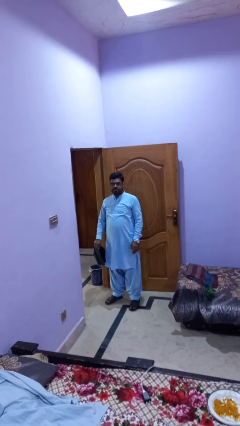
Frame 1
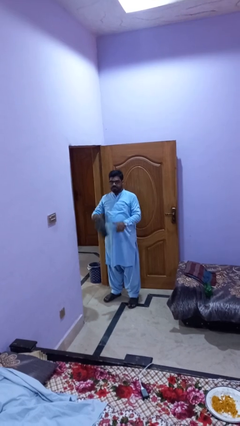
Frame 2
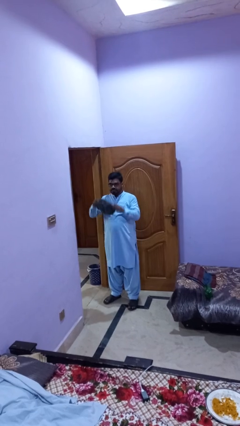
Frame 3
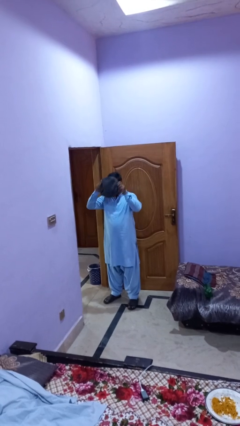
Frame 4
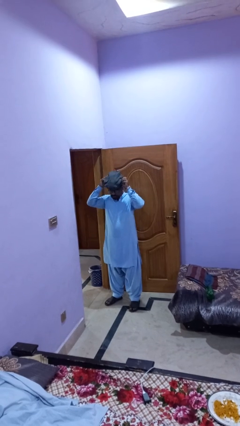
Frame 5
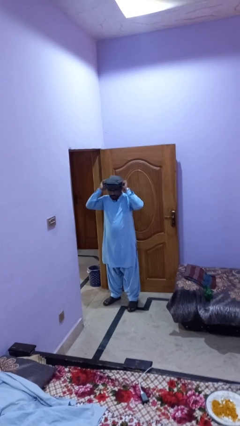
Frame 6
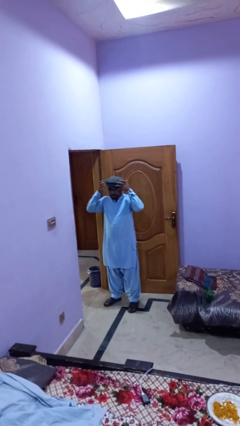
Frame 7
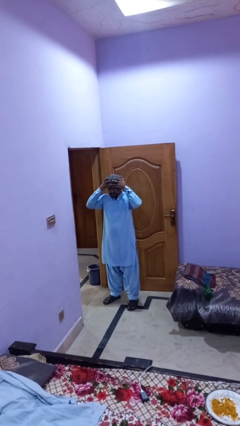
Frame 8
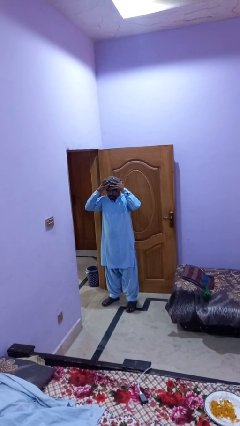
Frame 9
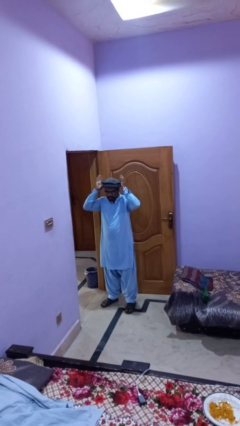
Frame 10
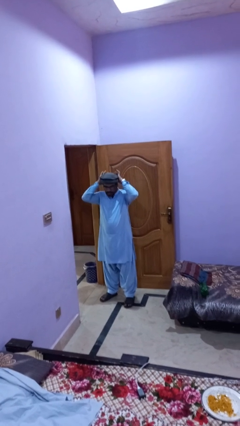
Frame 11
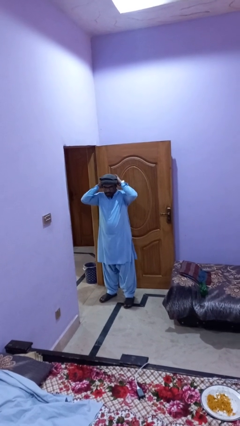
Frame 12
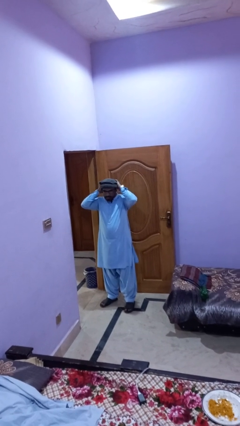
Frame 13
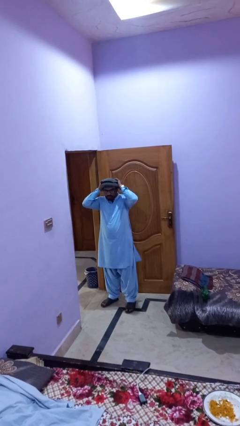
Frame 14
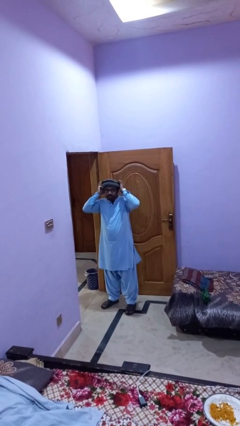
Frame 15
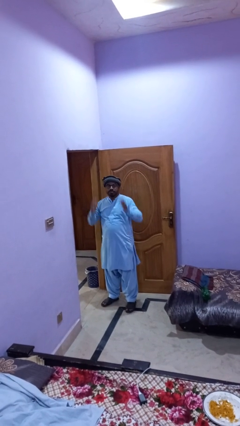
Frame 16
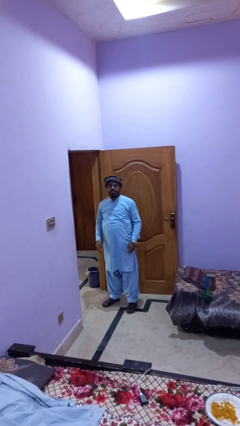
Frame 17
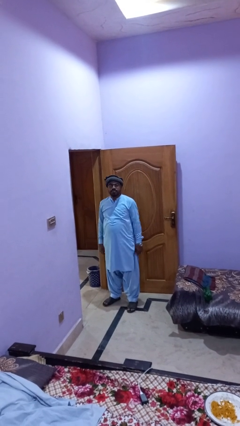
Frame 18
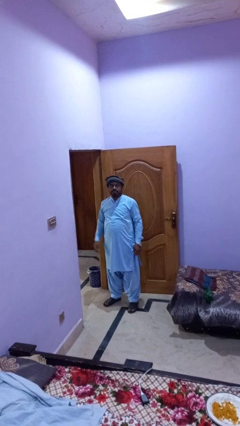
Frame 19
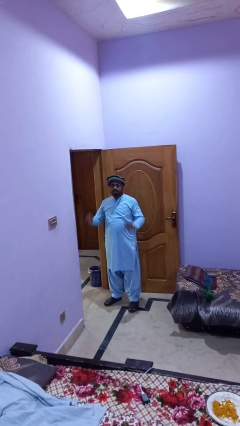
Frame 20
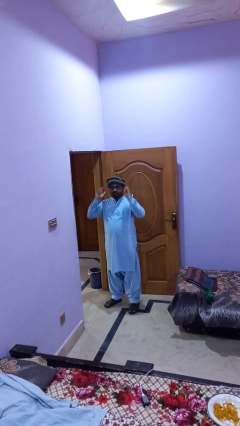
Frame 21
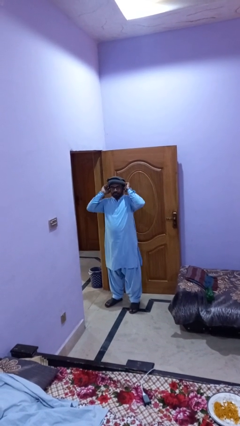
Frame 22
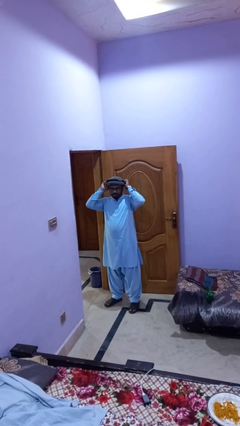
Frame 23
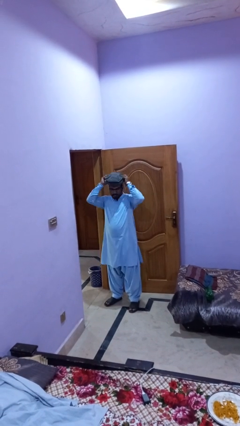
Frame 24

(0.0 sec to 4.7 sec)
person puts on hat

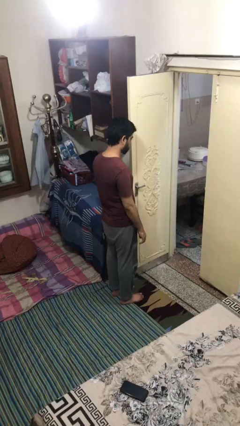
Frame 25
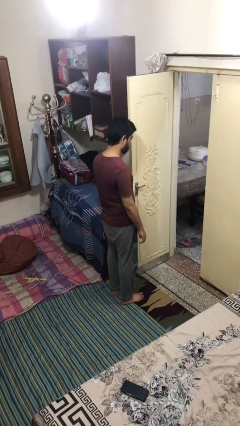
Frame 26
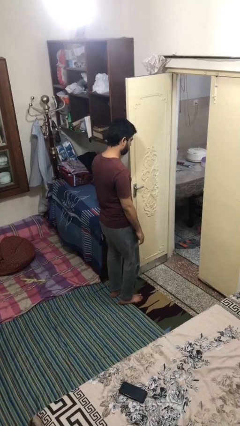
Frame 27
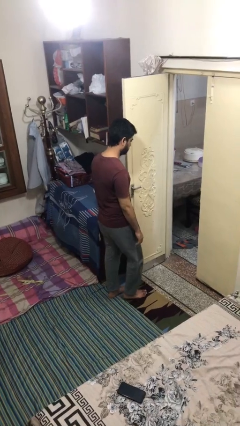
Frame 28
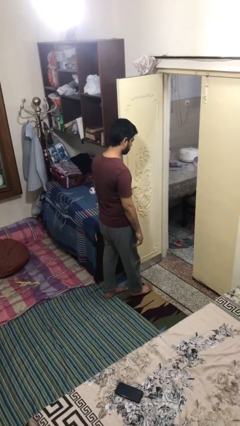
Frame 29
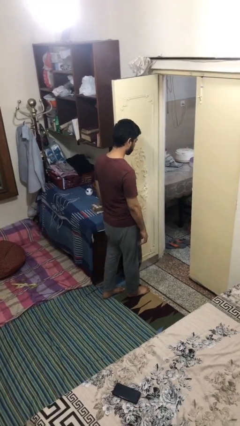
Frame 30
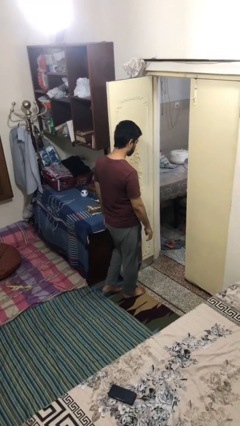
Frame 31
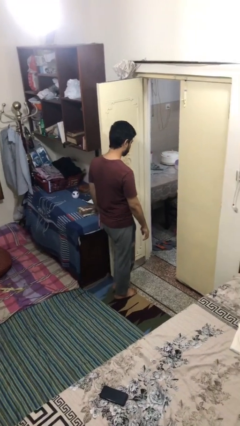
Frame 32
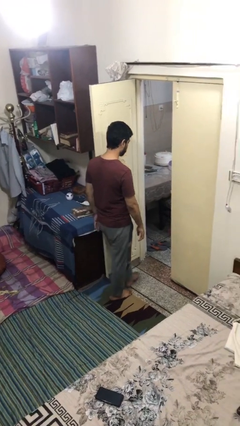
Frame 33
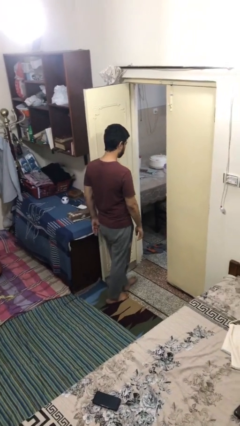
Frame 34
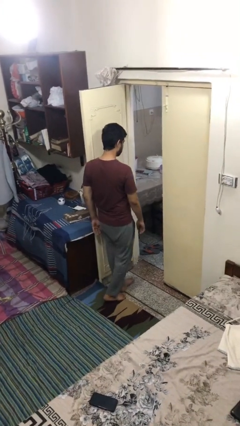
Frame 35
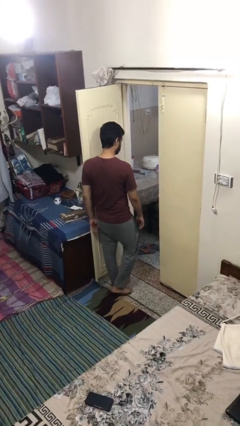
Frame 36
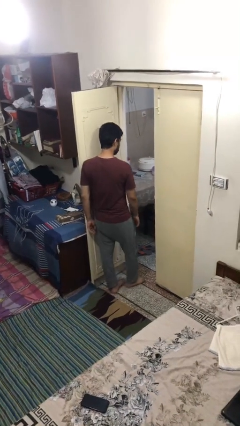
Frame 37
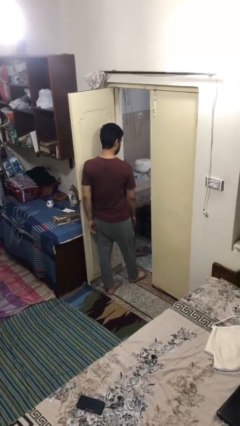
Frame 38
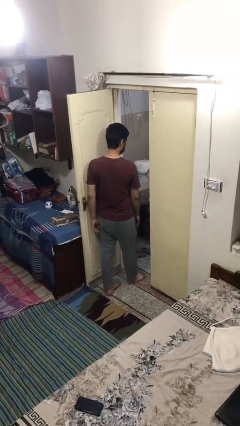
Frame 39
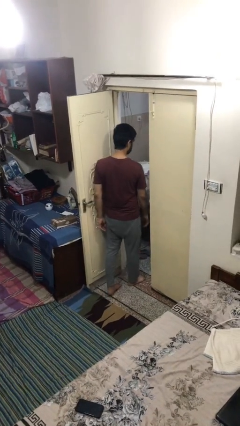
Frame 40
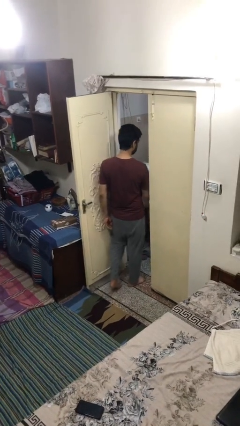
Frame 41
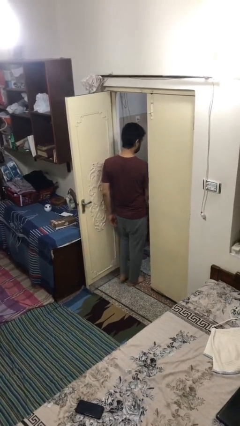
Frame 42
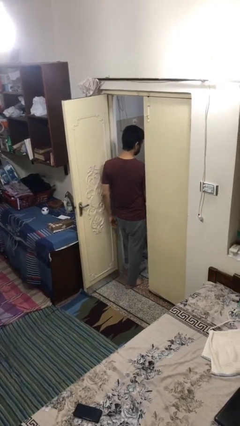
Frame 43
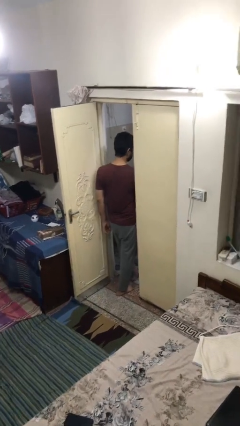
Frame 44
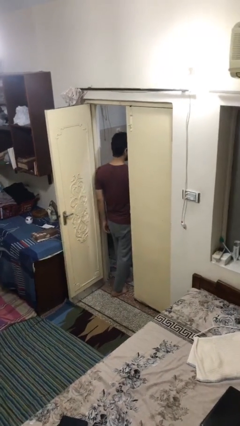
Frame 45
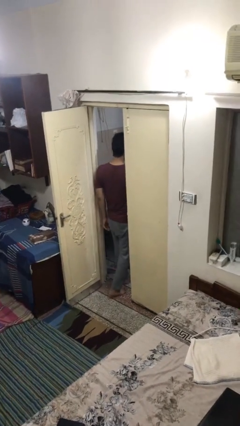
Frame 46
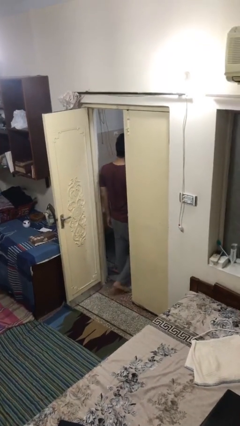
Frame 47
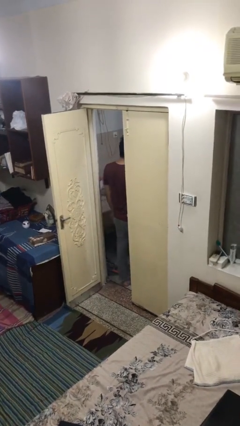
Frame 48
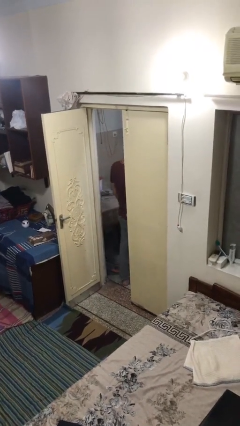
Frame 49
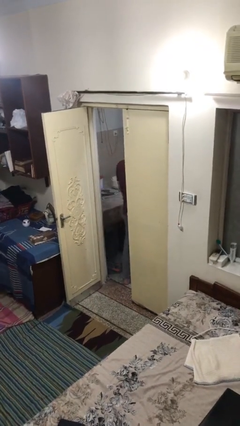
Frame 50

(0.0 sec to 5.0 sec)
person exits scene through structure

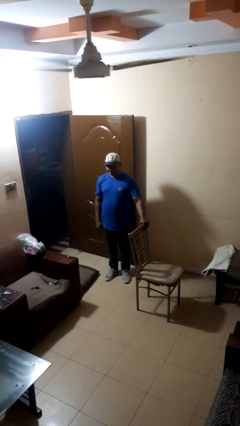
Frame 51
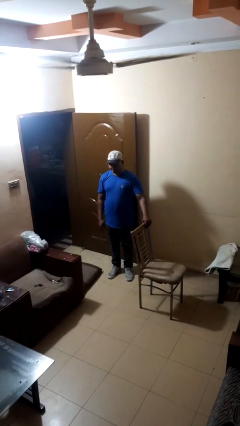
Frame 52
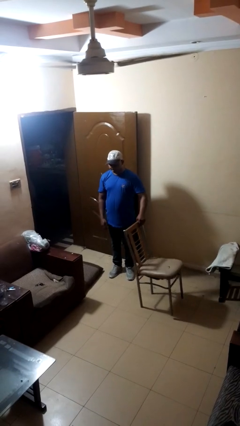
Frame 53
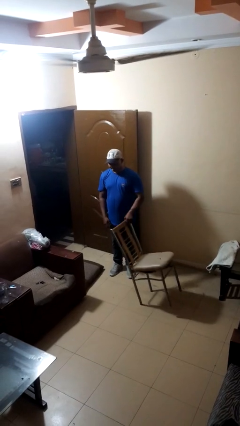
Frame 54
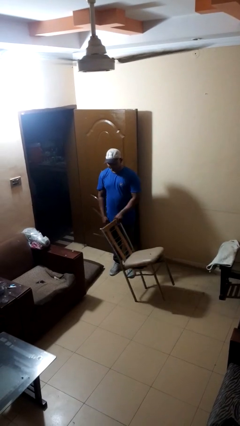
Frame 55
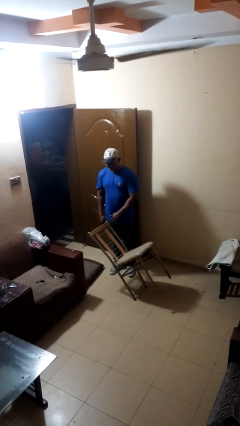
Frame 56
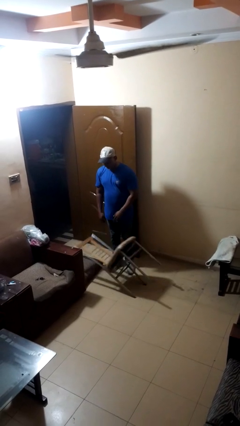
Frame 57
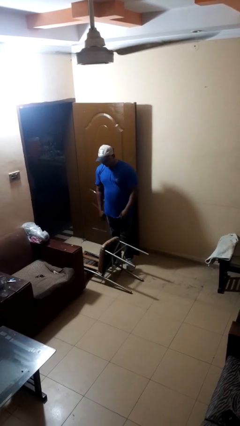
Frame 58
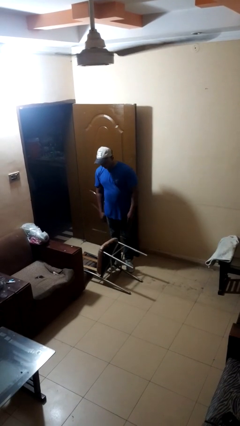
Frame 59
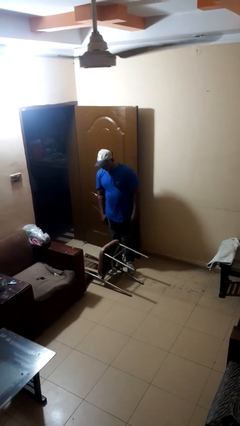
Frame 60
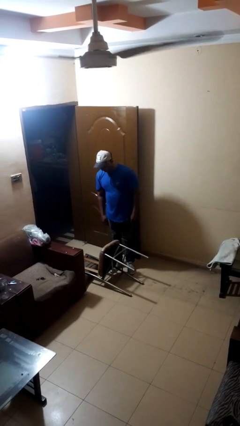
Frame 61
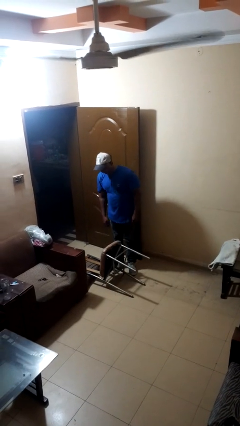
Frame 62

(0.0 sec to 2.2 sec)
person knocks over furniture

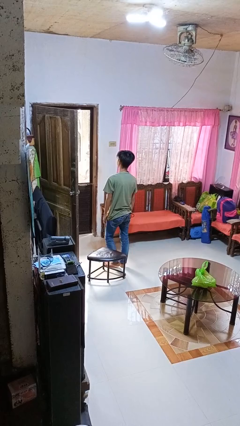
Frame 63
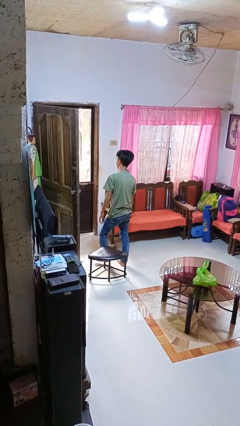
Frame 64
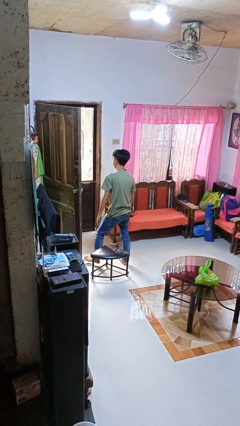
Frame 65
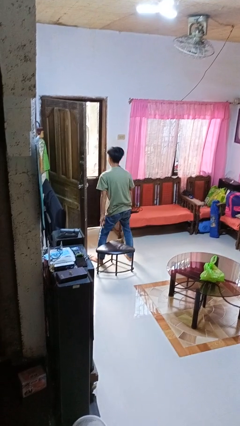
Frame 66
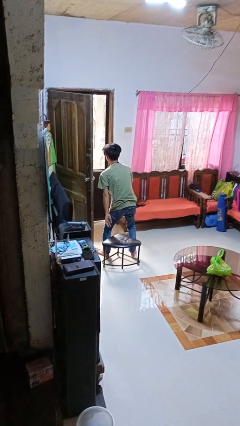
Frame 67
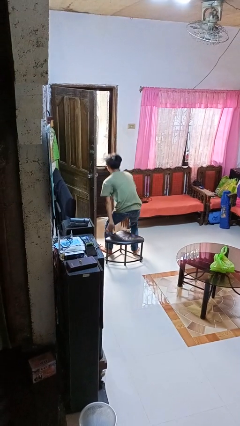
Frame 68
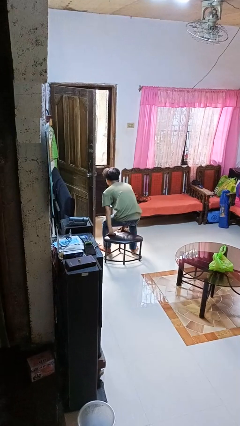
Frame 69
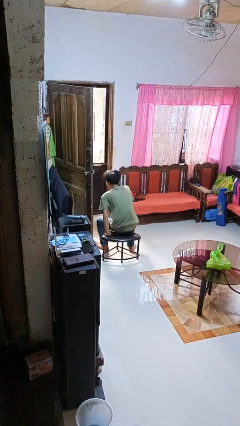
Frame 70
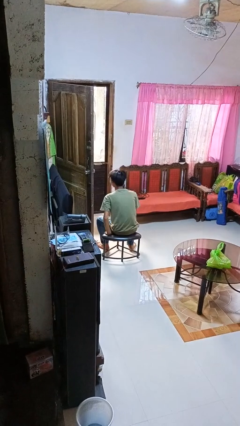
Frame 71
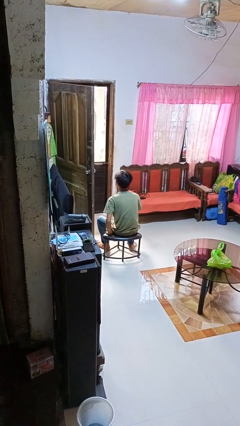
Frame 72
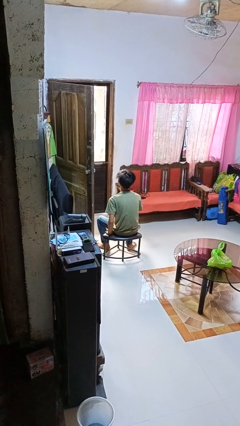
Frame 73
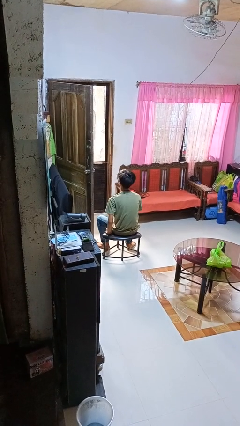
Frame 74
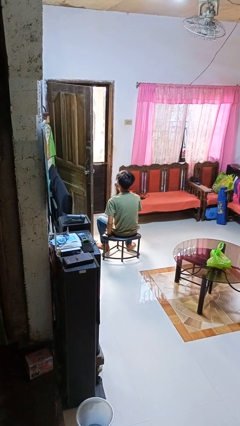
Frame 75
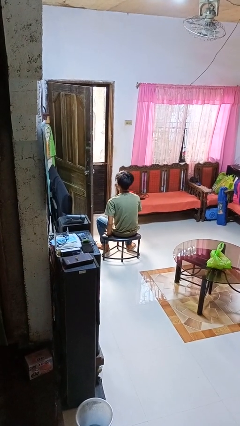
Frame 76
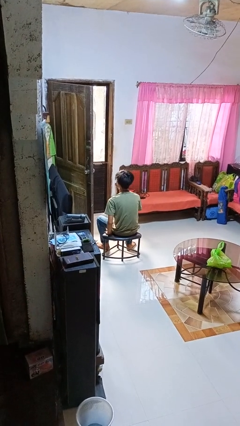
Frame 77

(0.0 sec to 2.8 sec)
person sits down

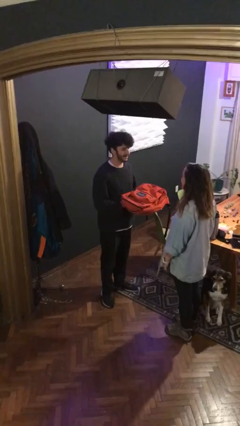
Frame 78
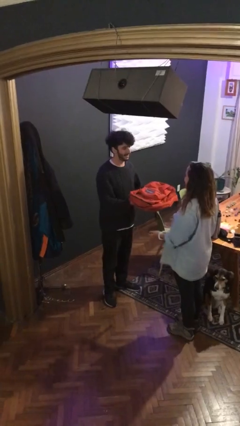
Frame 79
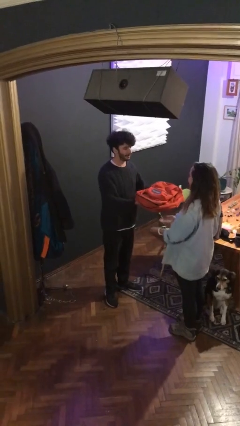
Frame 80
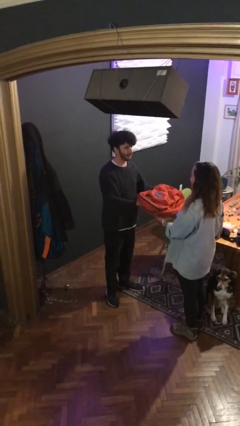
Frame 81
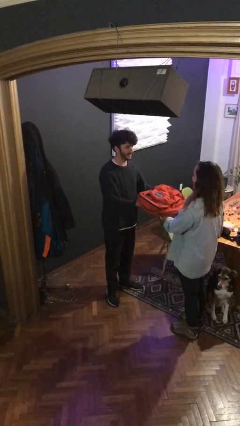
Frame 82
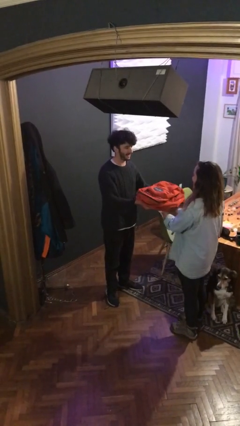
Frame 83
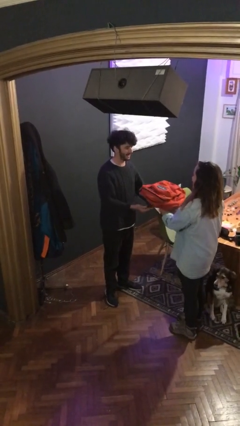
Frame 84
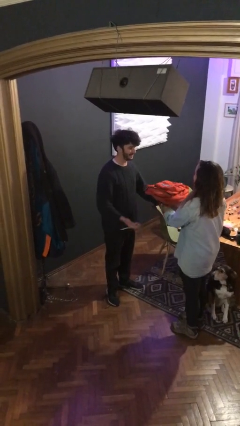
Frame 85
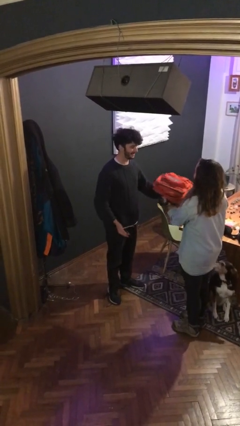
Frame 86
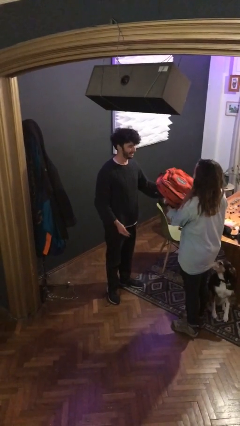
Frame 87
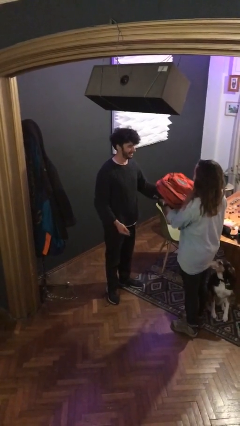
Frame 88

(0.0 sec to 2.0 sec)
person transfers object to person

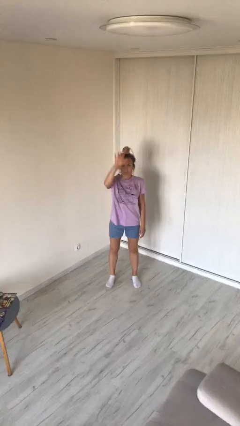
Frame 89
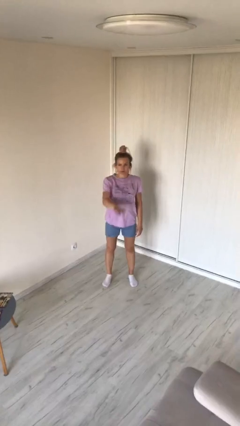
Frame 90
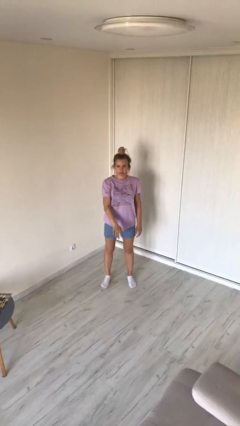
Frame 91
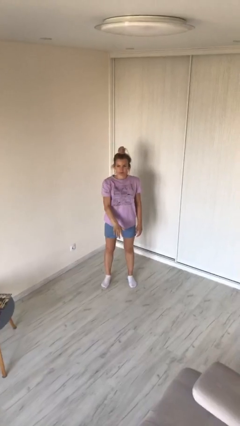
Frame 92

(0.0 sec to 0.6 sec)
person gestures swipe down

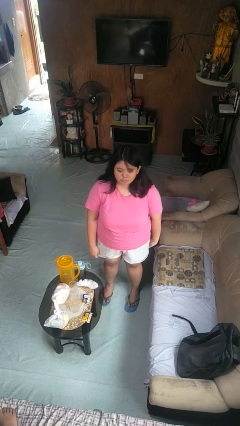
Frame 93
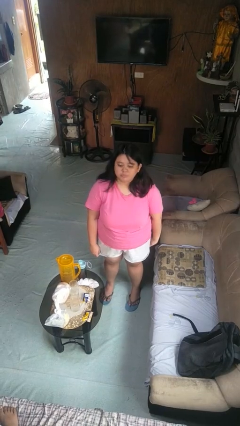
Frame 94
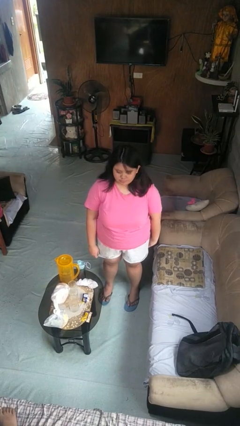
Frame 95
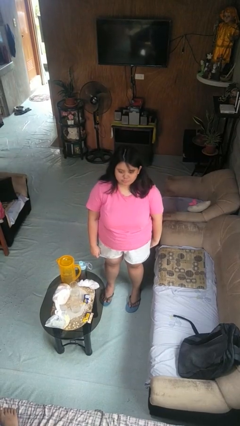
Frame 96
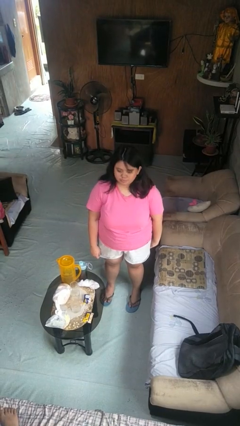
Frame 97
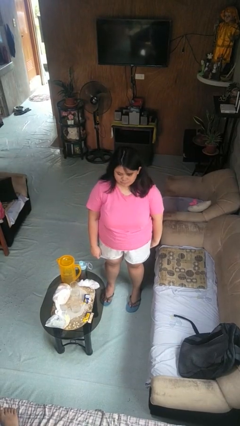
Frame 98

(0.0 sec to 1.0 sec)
person nods head
